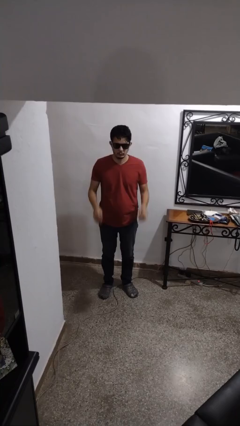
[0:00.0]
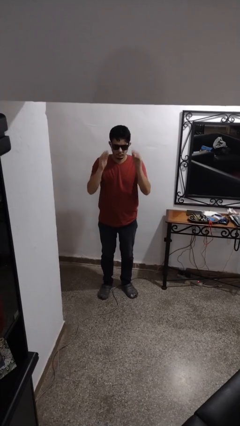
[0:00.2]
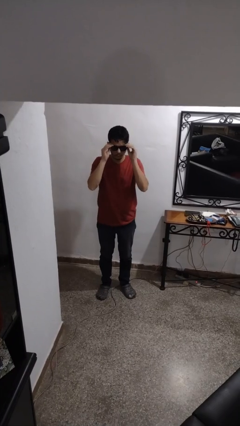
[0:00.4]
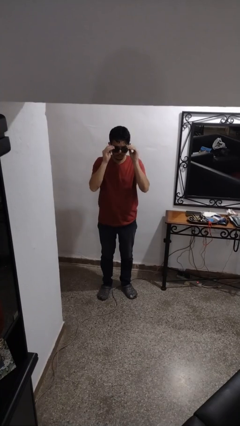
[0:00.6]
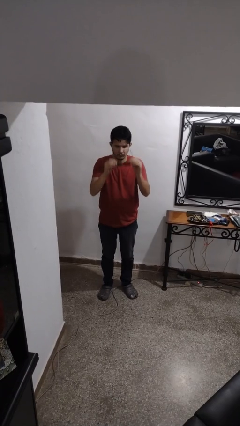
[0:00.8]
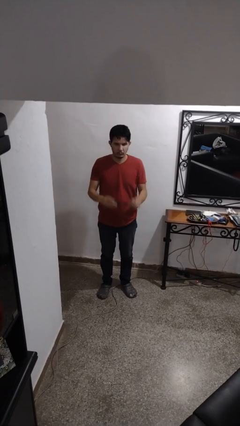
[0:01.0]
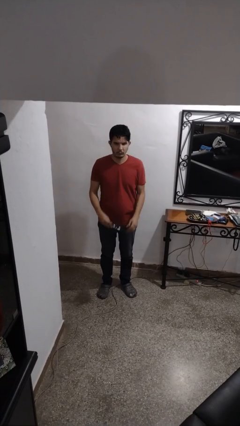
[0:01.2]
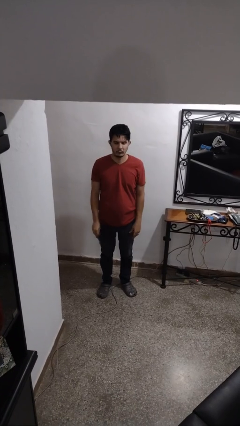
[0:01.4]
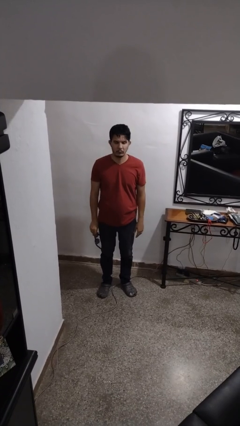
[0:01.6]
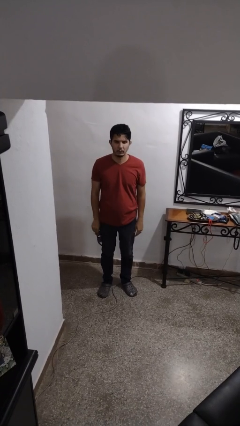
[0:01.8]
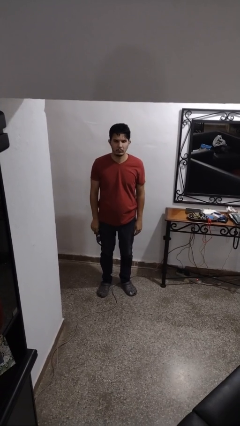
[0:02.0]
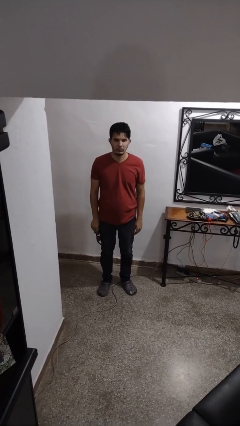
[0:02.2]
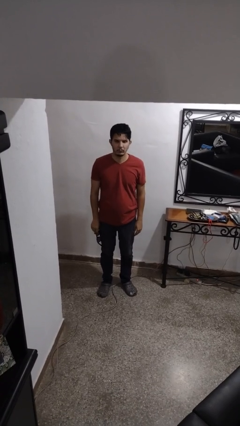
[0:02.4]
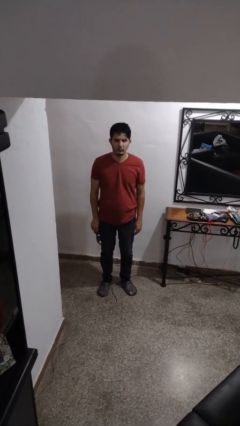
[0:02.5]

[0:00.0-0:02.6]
person takes off sunglasses

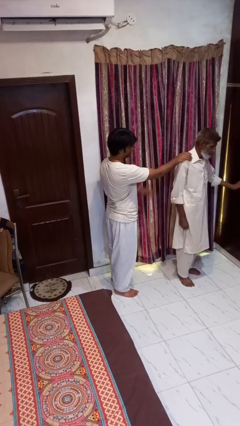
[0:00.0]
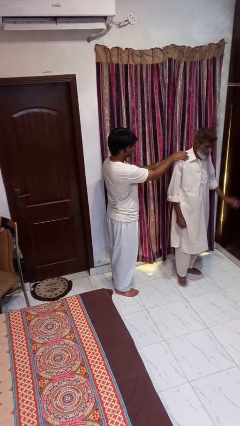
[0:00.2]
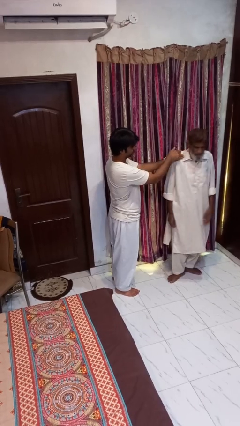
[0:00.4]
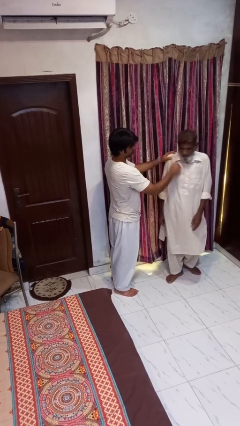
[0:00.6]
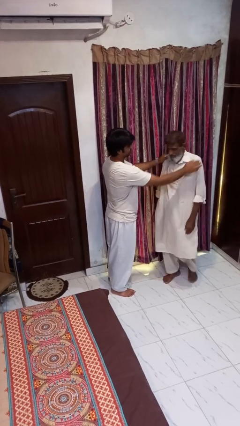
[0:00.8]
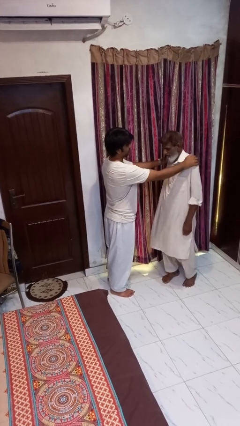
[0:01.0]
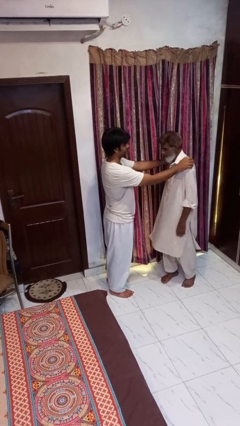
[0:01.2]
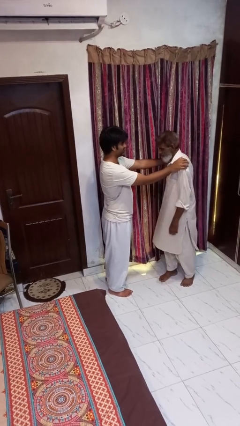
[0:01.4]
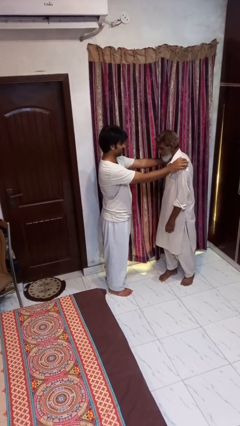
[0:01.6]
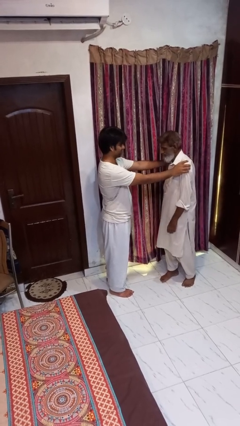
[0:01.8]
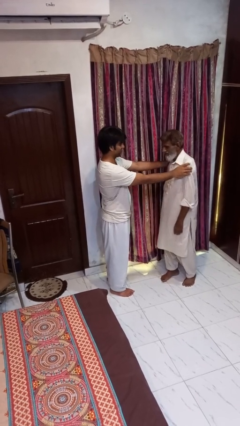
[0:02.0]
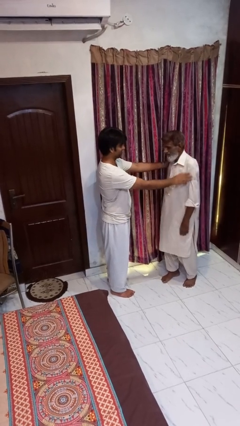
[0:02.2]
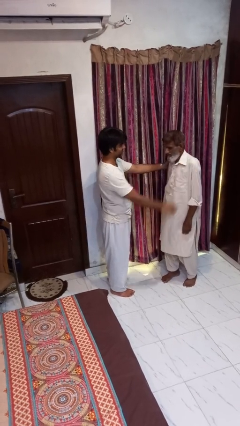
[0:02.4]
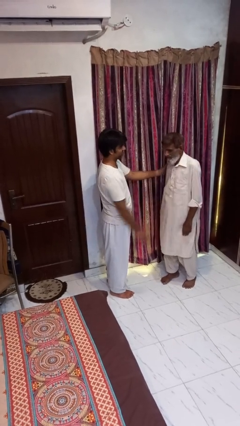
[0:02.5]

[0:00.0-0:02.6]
person spins person around

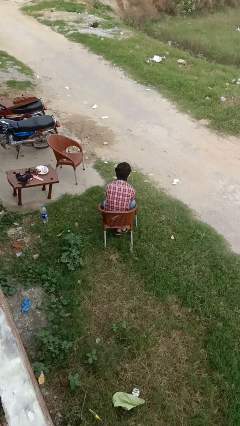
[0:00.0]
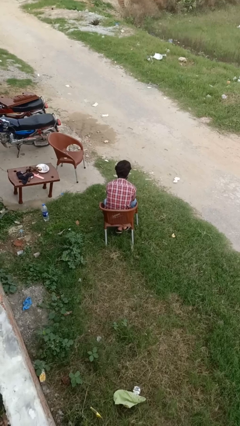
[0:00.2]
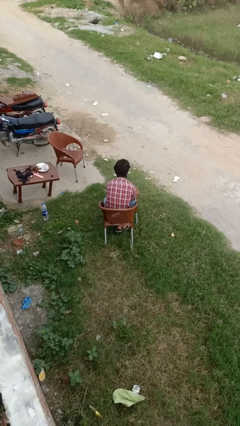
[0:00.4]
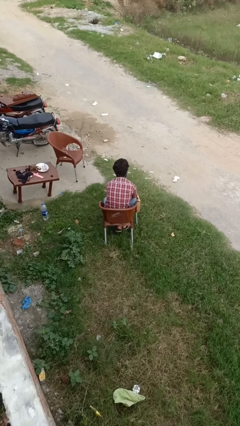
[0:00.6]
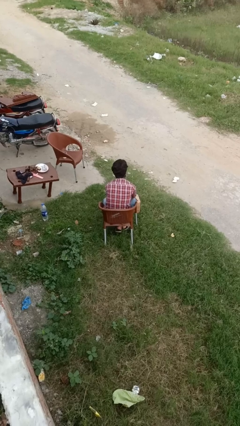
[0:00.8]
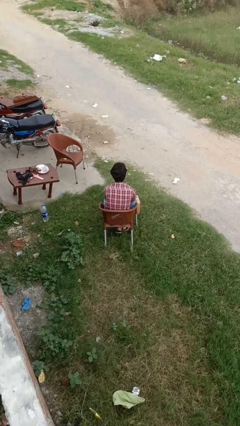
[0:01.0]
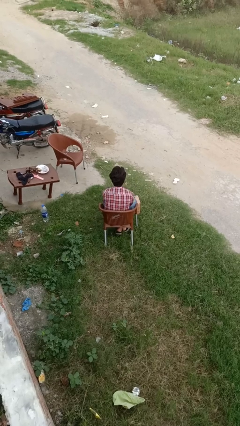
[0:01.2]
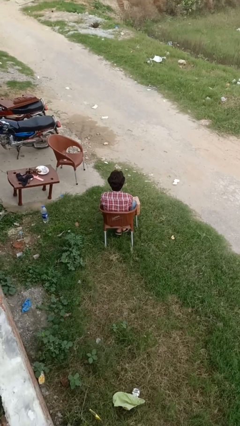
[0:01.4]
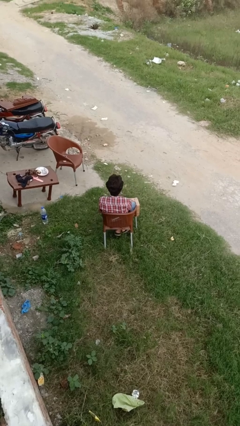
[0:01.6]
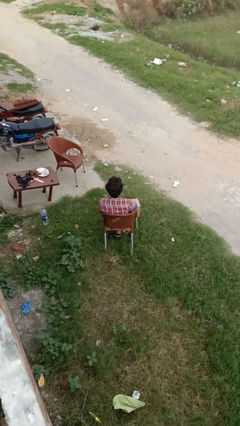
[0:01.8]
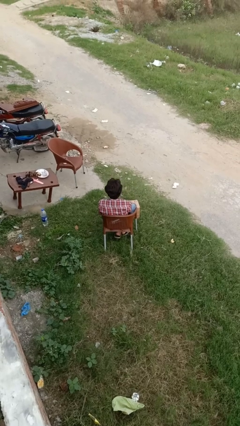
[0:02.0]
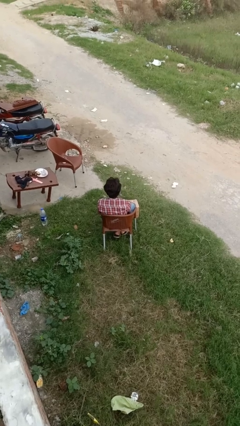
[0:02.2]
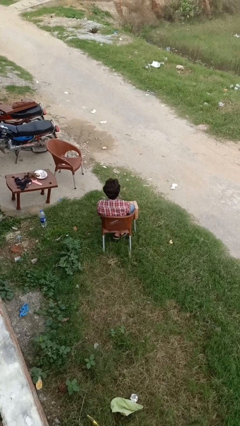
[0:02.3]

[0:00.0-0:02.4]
person closes mailbox

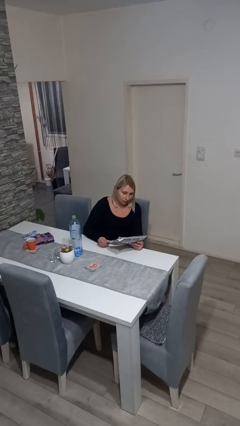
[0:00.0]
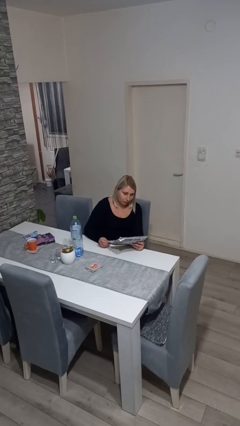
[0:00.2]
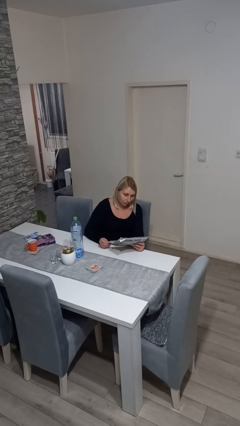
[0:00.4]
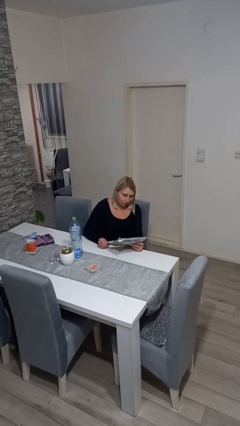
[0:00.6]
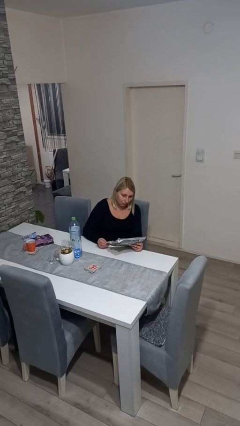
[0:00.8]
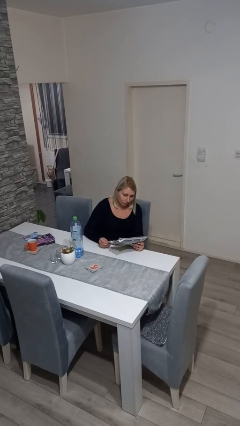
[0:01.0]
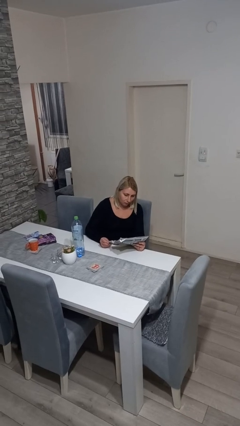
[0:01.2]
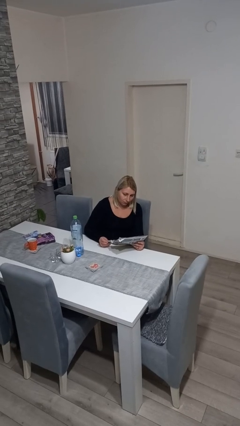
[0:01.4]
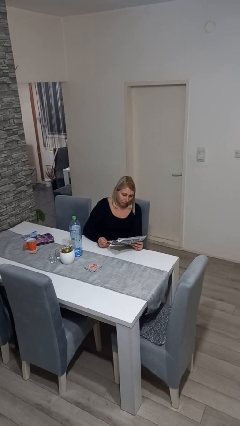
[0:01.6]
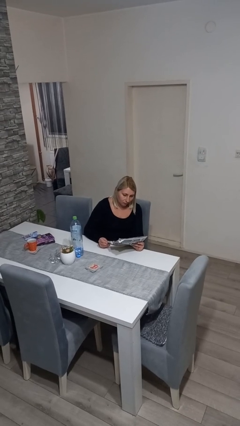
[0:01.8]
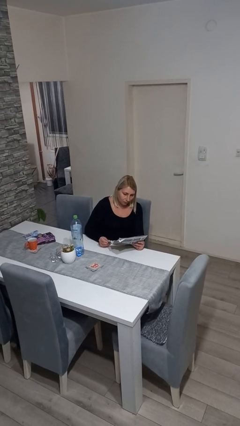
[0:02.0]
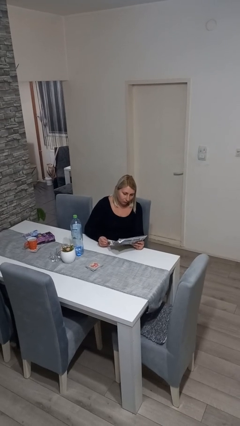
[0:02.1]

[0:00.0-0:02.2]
person reads newspaper

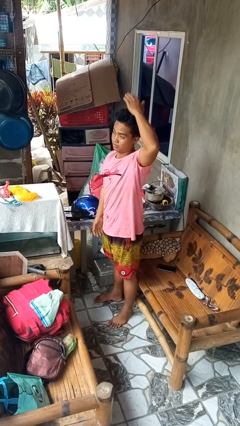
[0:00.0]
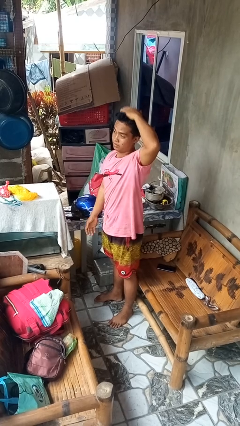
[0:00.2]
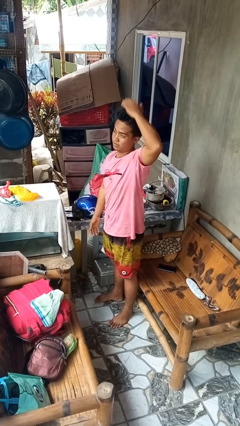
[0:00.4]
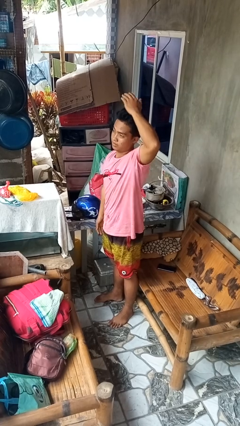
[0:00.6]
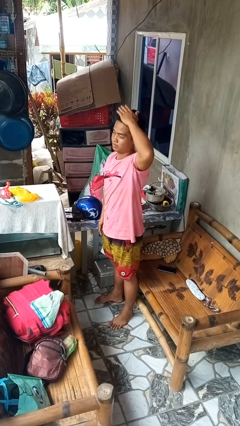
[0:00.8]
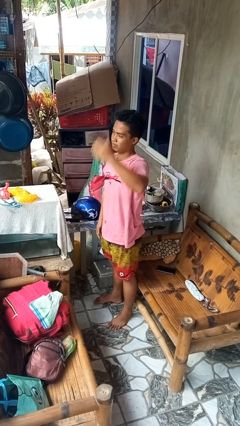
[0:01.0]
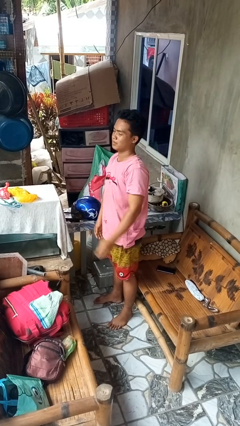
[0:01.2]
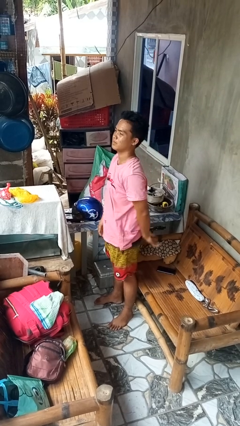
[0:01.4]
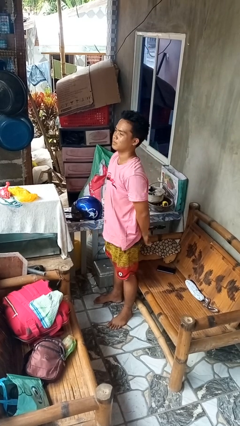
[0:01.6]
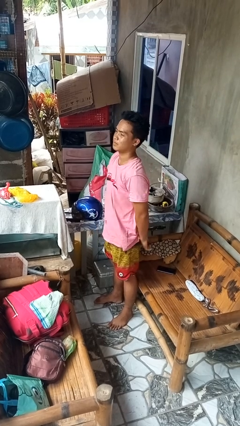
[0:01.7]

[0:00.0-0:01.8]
person pats head

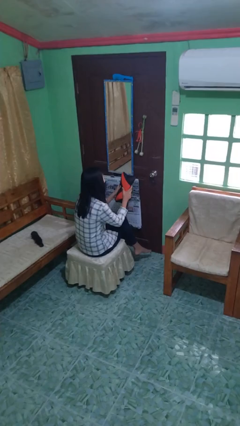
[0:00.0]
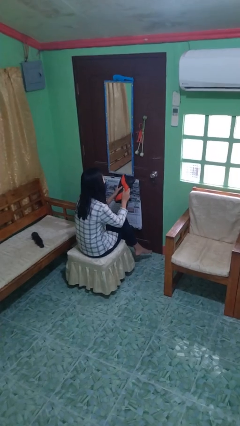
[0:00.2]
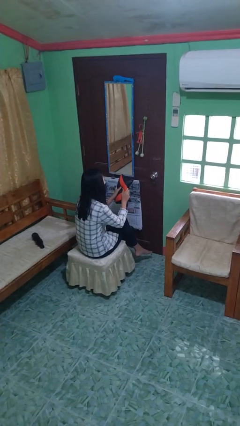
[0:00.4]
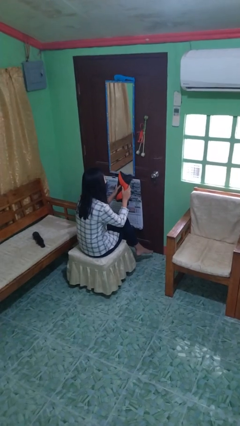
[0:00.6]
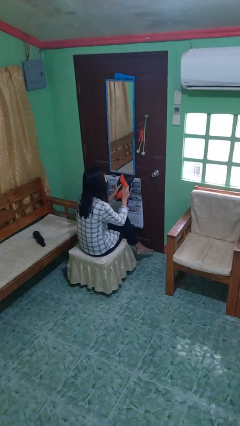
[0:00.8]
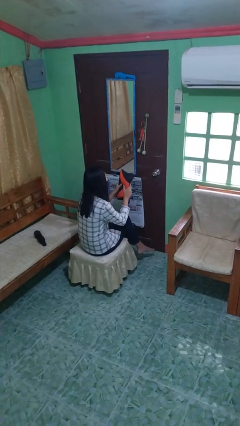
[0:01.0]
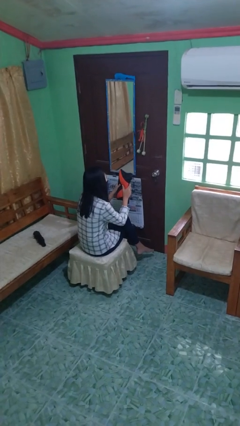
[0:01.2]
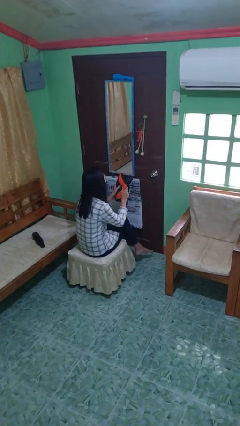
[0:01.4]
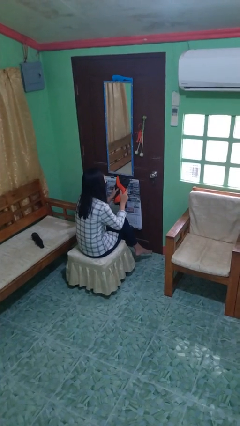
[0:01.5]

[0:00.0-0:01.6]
person squeezes object

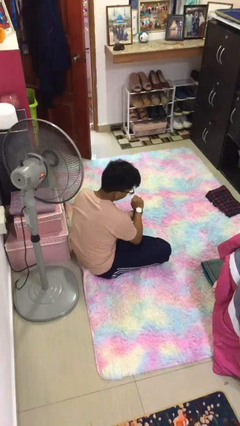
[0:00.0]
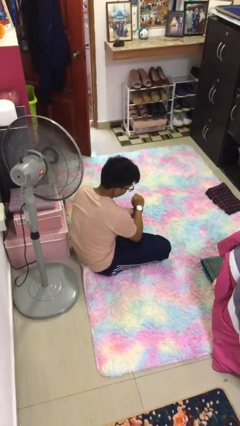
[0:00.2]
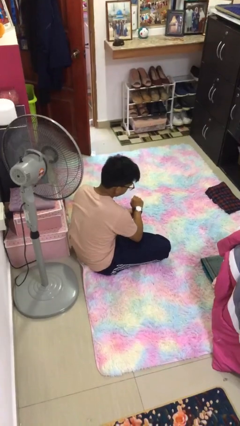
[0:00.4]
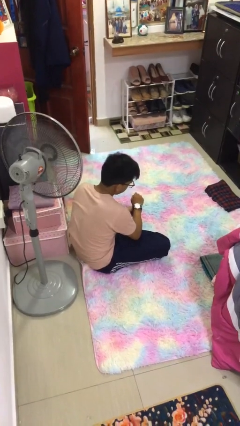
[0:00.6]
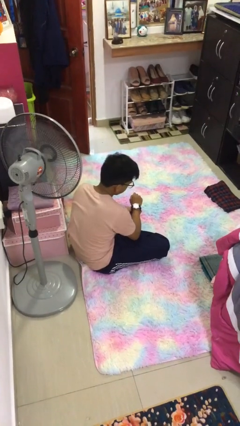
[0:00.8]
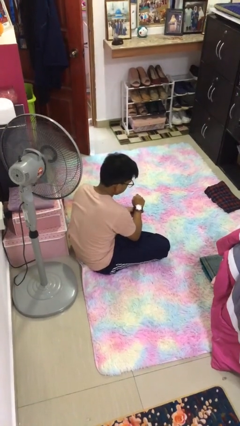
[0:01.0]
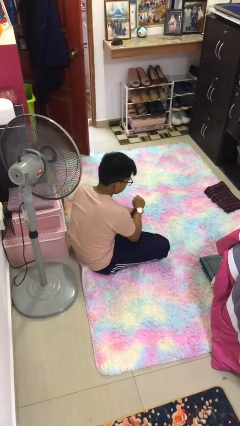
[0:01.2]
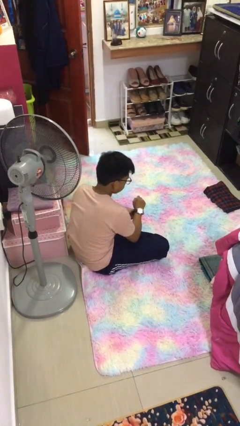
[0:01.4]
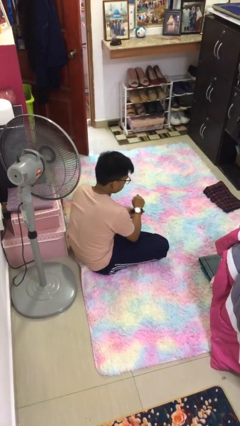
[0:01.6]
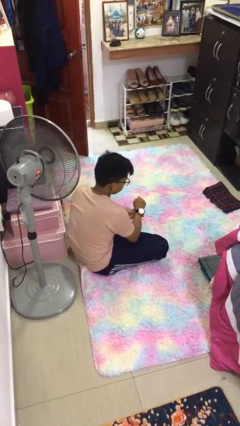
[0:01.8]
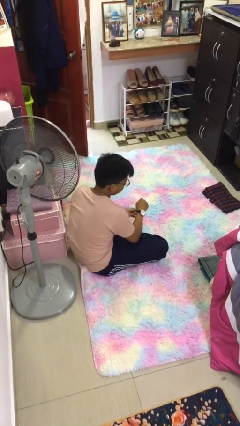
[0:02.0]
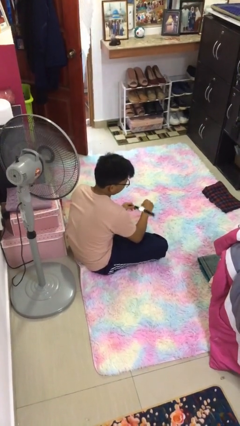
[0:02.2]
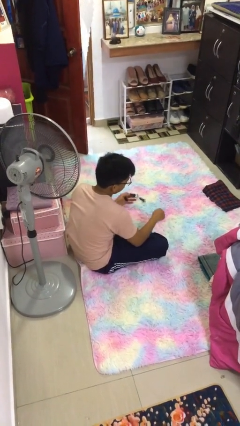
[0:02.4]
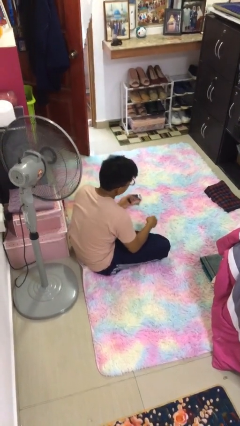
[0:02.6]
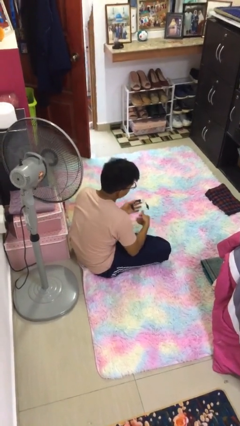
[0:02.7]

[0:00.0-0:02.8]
person takes off wristwatch

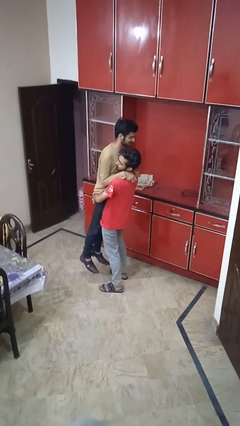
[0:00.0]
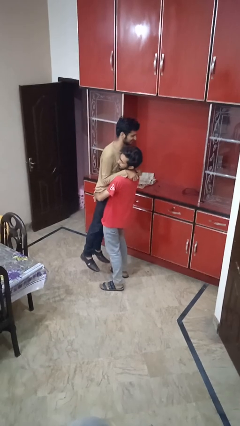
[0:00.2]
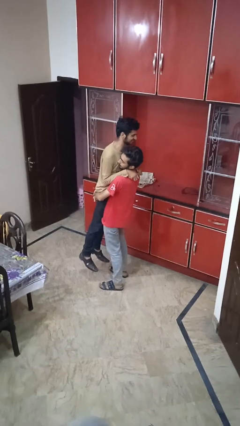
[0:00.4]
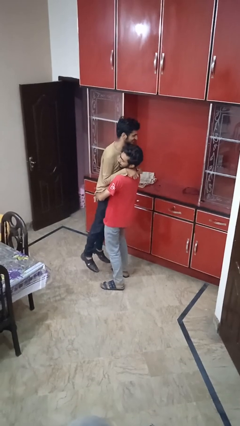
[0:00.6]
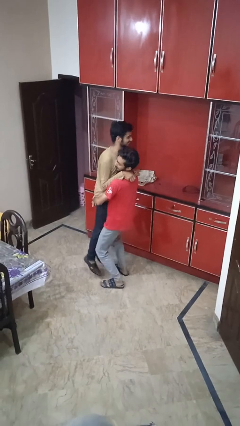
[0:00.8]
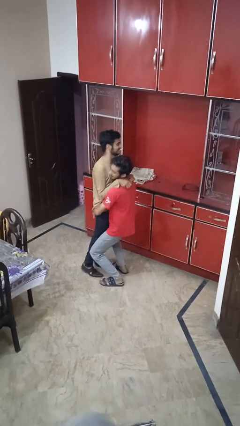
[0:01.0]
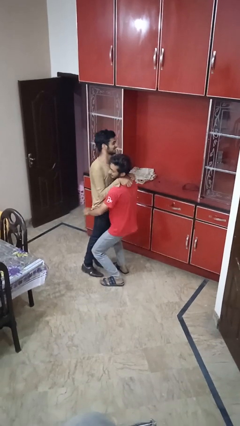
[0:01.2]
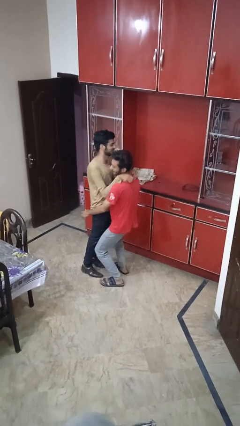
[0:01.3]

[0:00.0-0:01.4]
person puts down person
